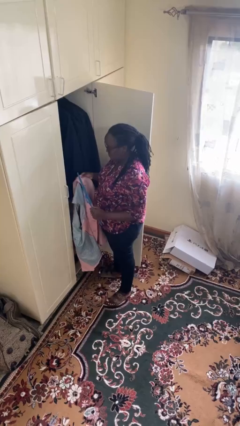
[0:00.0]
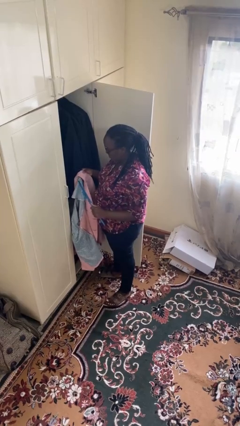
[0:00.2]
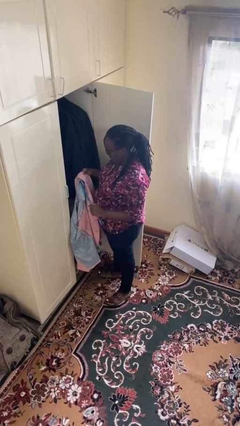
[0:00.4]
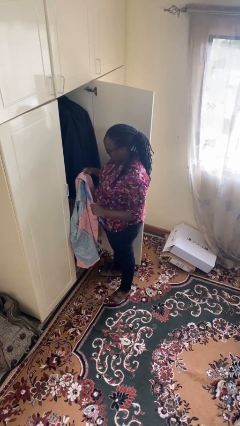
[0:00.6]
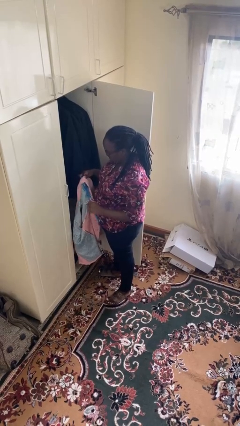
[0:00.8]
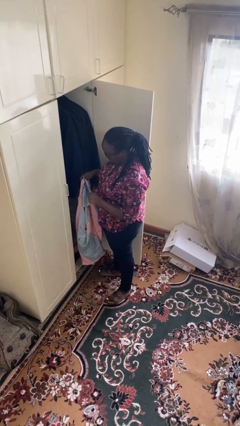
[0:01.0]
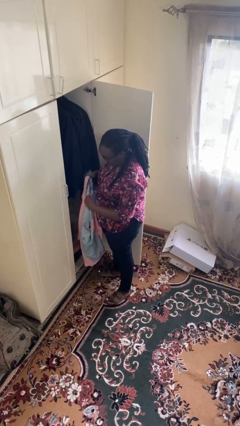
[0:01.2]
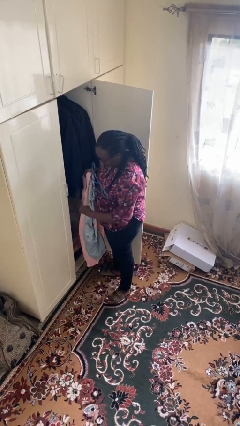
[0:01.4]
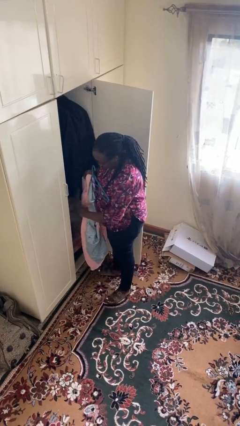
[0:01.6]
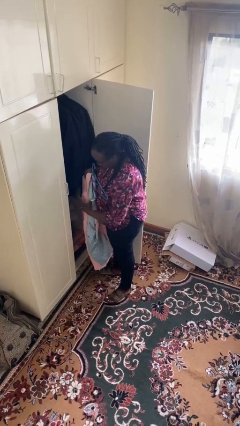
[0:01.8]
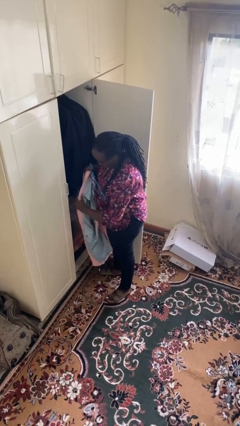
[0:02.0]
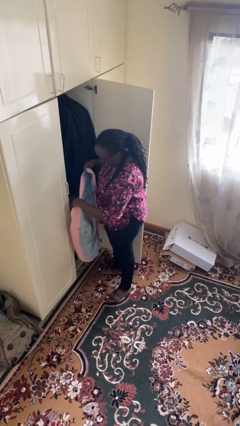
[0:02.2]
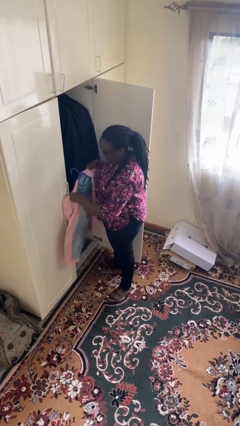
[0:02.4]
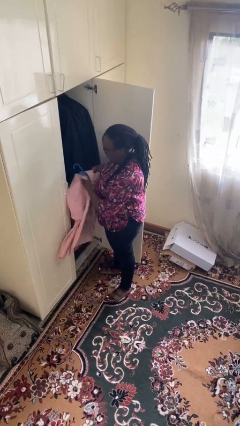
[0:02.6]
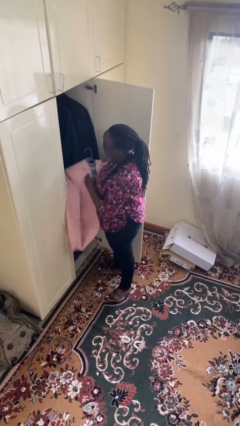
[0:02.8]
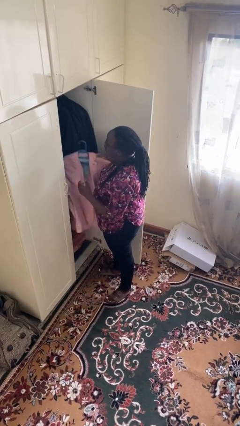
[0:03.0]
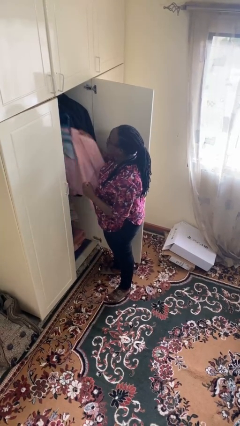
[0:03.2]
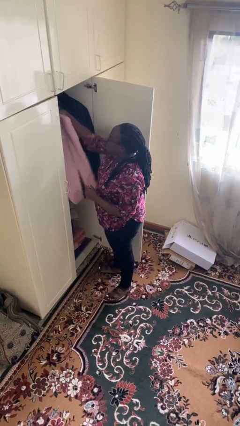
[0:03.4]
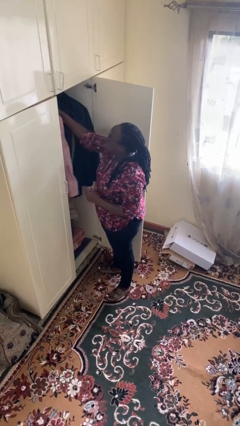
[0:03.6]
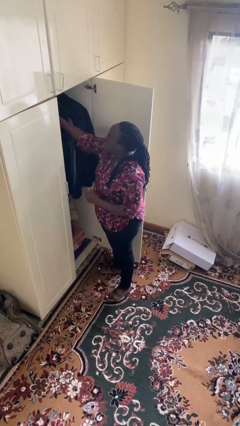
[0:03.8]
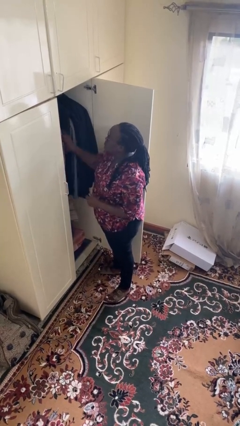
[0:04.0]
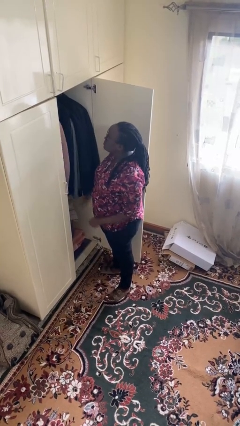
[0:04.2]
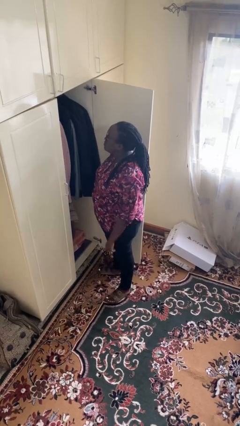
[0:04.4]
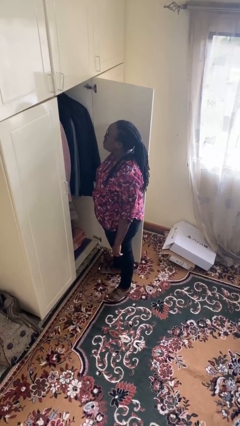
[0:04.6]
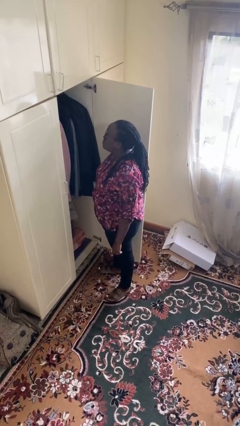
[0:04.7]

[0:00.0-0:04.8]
person puts clothes into closet

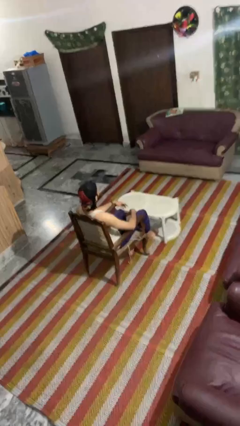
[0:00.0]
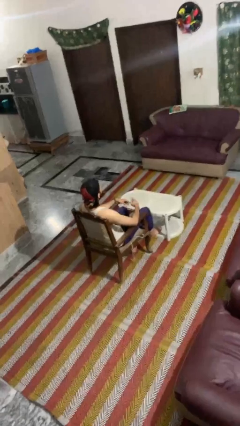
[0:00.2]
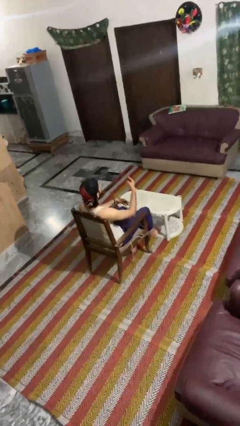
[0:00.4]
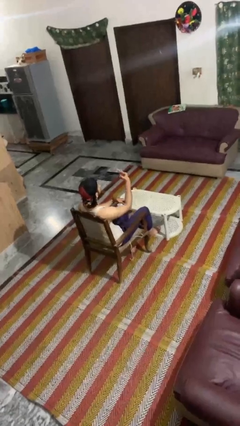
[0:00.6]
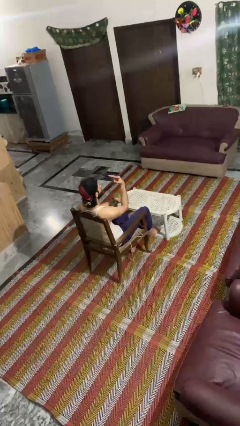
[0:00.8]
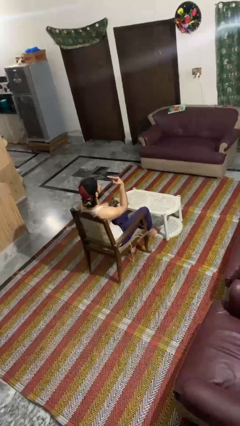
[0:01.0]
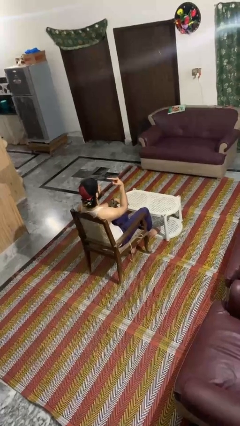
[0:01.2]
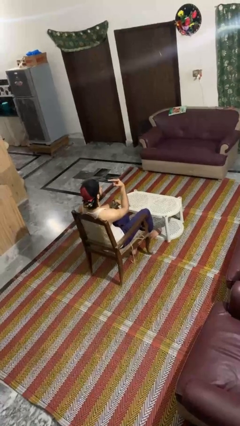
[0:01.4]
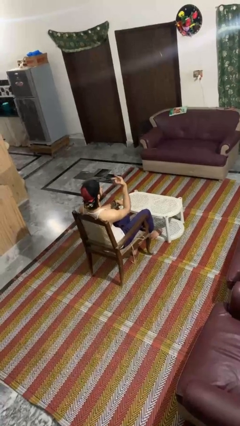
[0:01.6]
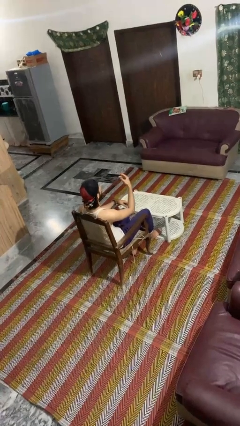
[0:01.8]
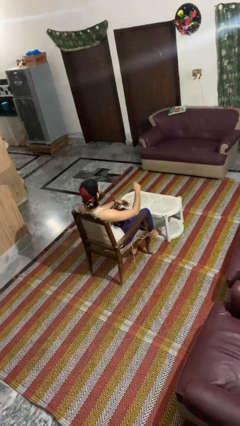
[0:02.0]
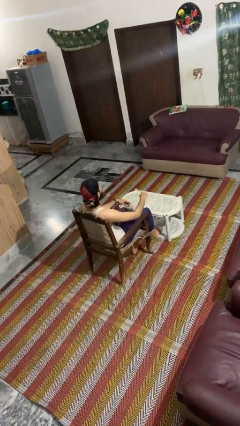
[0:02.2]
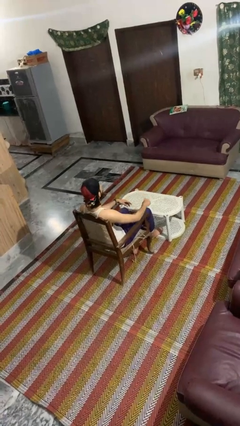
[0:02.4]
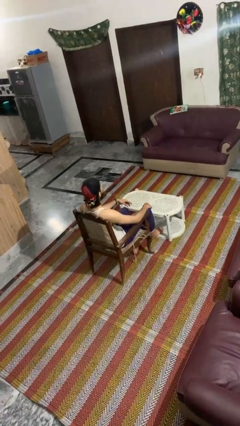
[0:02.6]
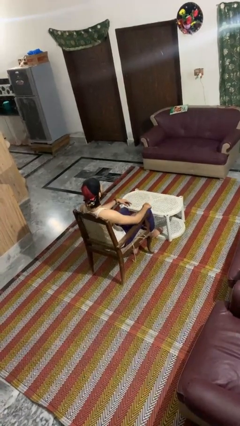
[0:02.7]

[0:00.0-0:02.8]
person gestures watch closely

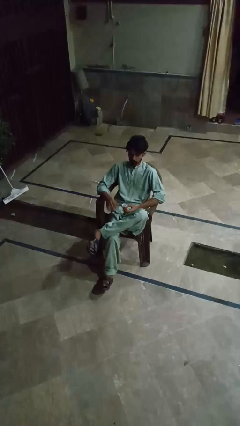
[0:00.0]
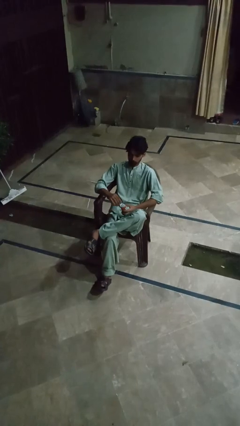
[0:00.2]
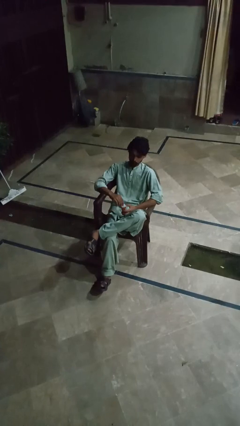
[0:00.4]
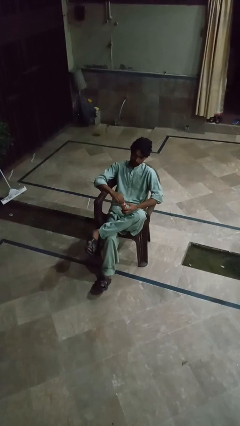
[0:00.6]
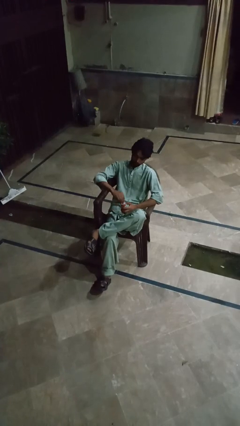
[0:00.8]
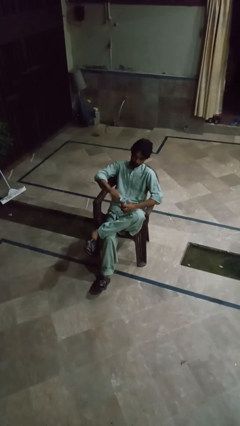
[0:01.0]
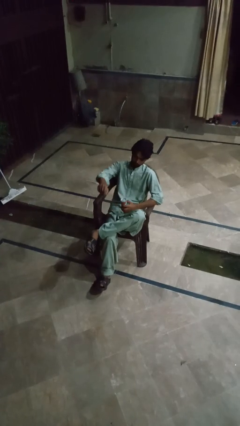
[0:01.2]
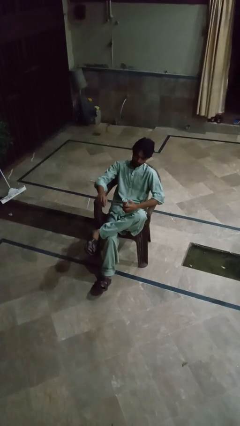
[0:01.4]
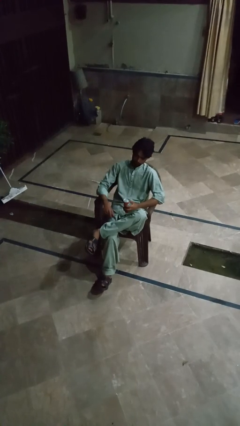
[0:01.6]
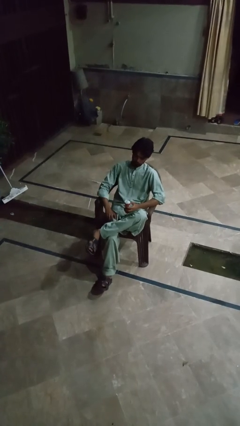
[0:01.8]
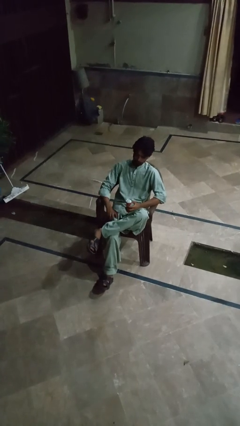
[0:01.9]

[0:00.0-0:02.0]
person opens can with can opener

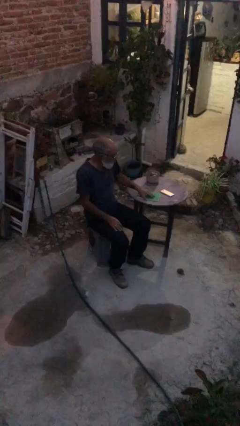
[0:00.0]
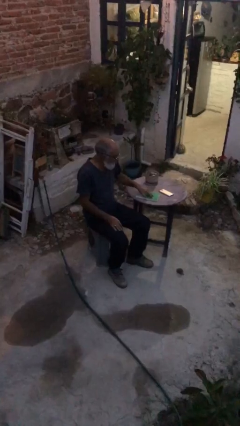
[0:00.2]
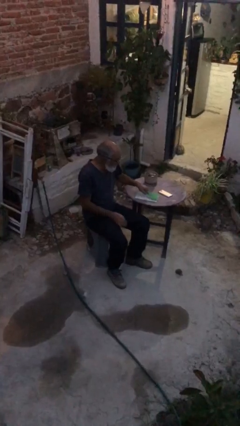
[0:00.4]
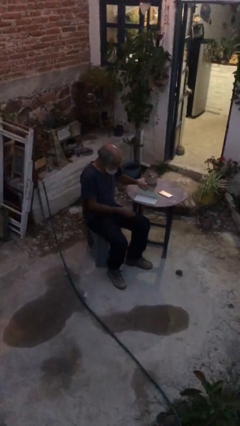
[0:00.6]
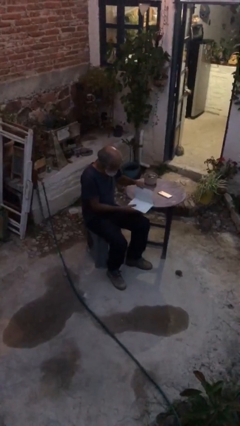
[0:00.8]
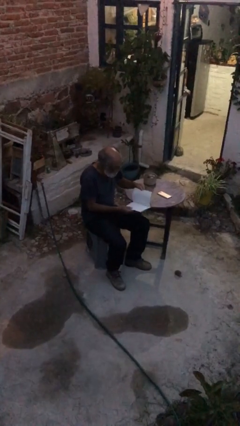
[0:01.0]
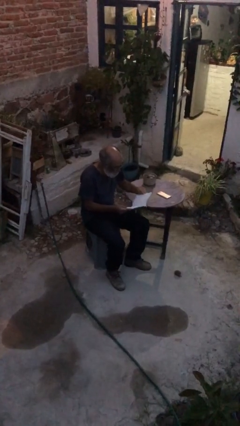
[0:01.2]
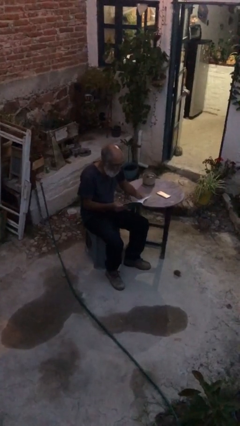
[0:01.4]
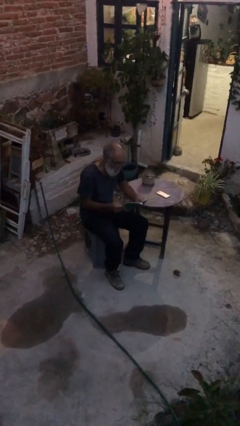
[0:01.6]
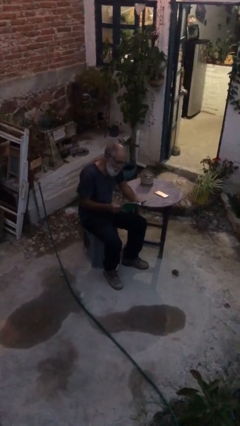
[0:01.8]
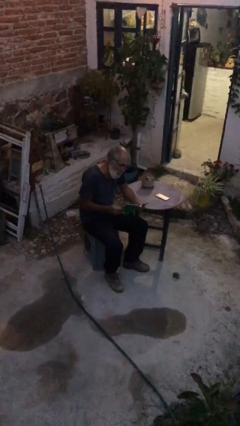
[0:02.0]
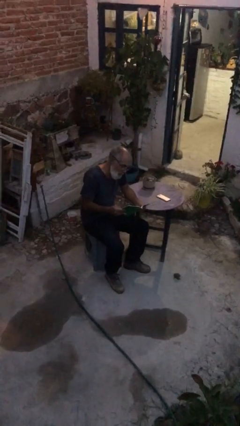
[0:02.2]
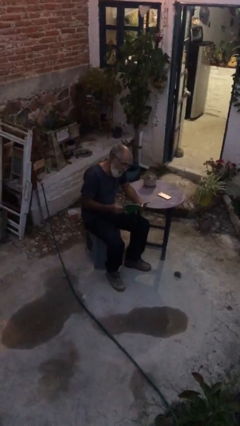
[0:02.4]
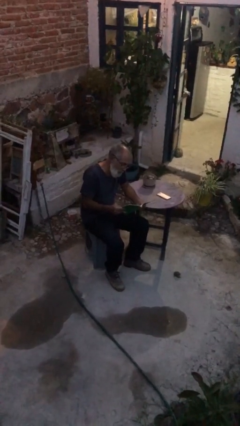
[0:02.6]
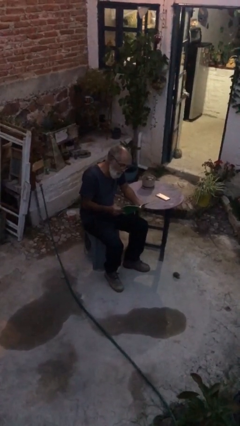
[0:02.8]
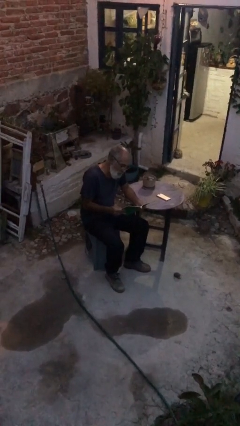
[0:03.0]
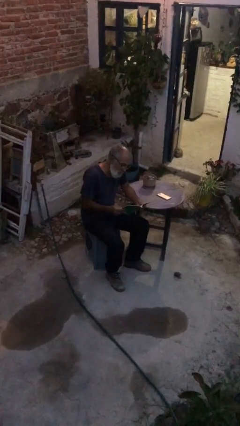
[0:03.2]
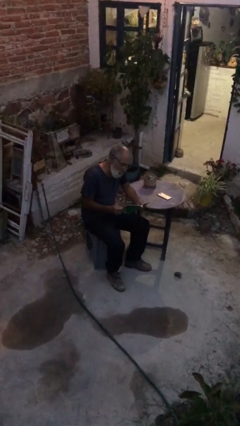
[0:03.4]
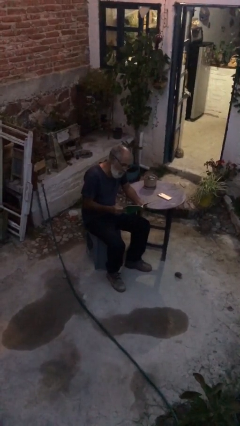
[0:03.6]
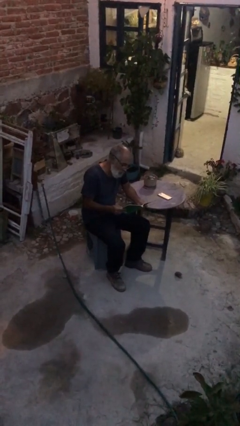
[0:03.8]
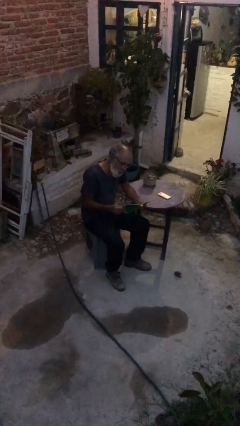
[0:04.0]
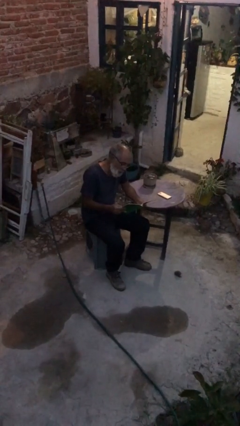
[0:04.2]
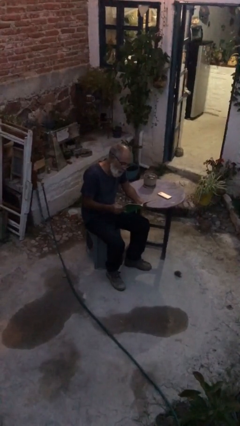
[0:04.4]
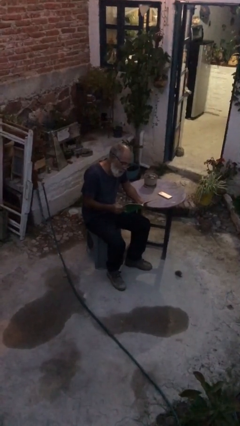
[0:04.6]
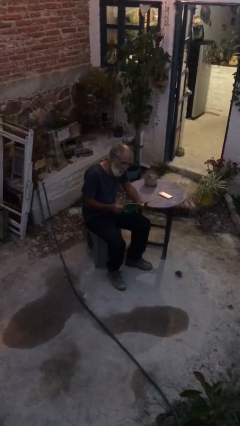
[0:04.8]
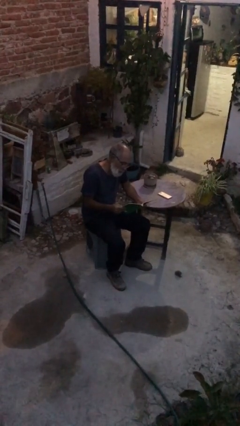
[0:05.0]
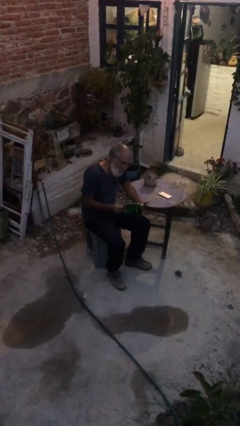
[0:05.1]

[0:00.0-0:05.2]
person reads document

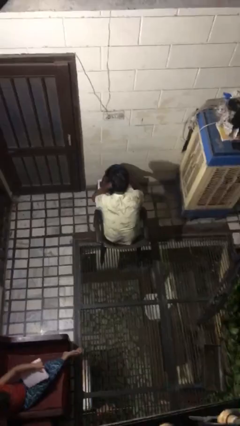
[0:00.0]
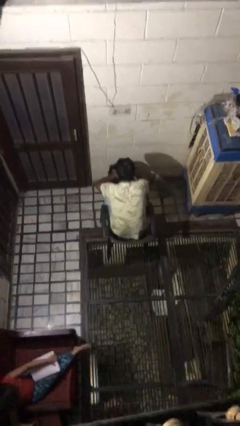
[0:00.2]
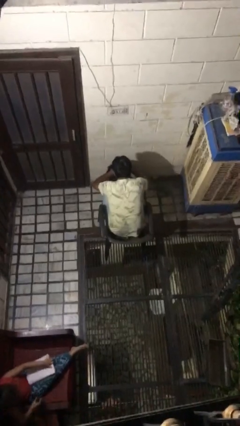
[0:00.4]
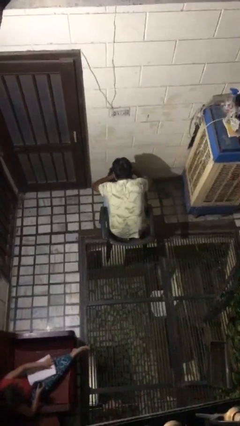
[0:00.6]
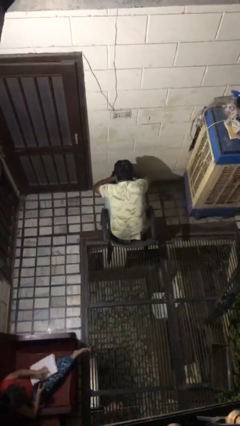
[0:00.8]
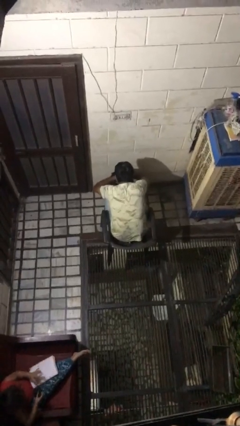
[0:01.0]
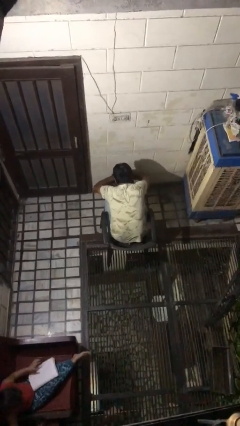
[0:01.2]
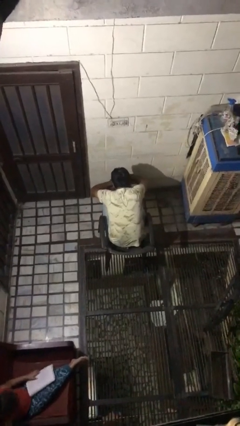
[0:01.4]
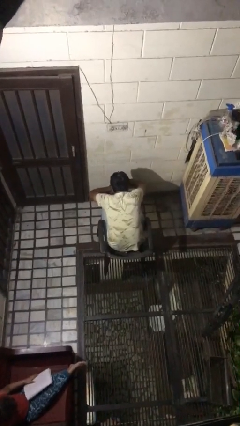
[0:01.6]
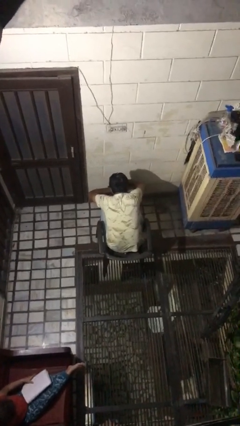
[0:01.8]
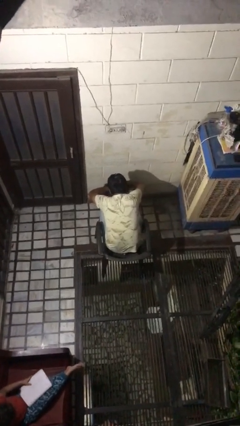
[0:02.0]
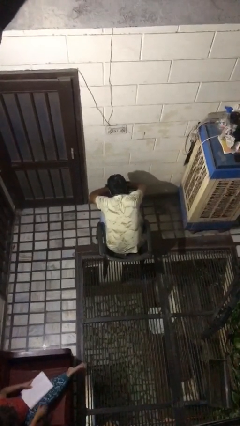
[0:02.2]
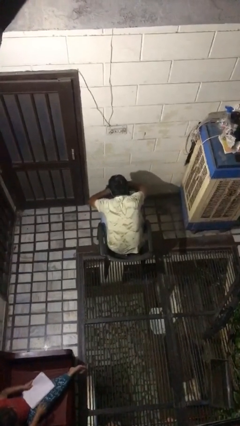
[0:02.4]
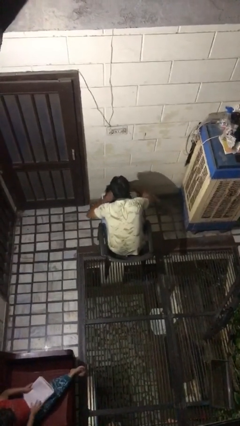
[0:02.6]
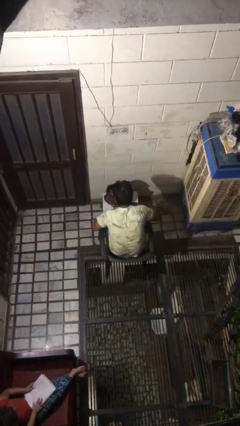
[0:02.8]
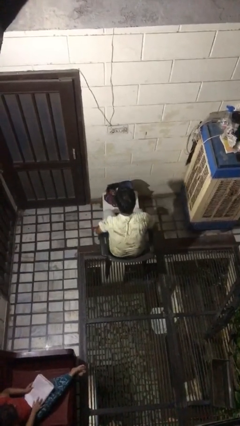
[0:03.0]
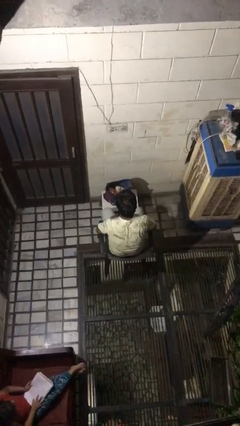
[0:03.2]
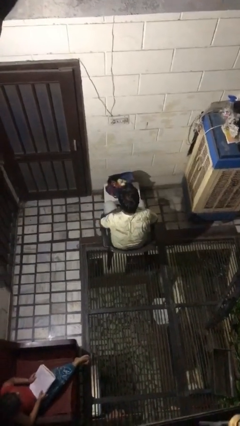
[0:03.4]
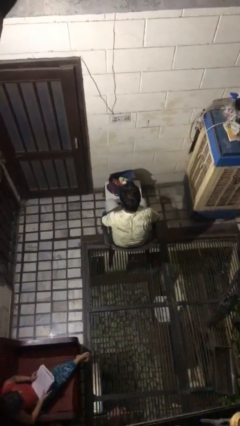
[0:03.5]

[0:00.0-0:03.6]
person searches in bag
